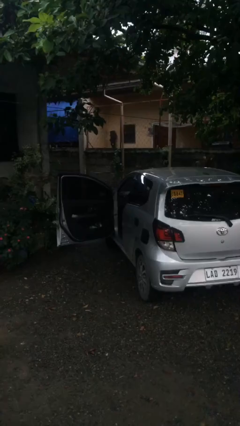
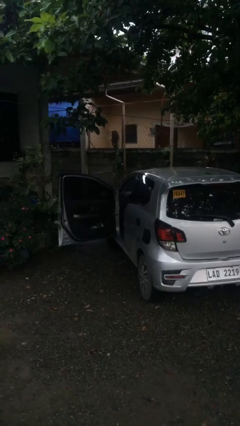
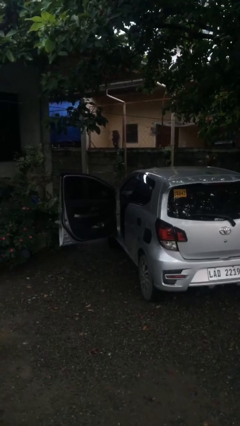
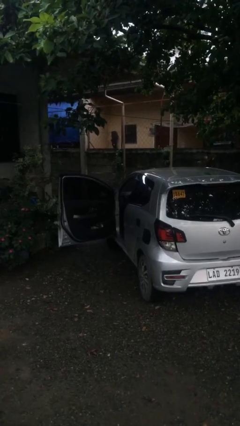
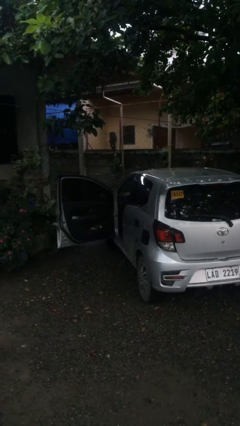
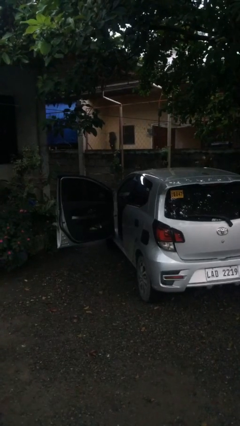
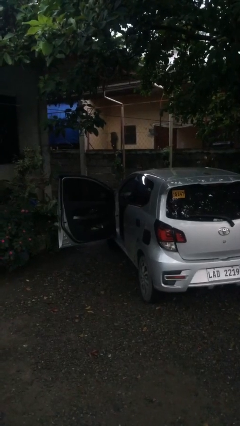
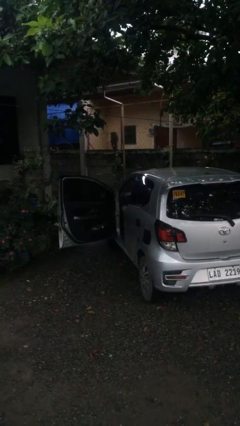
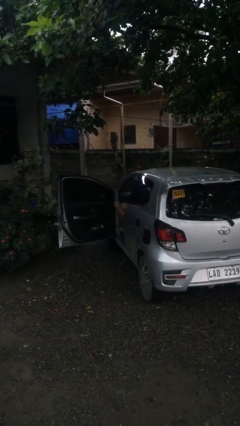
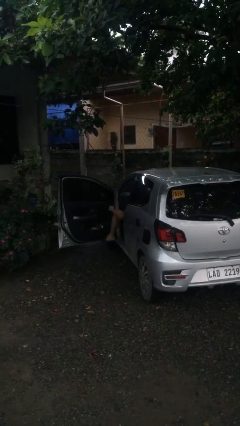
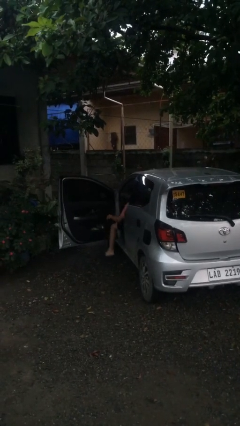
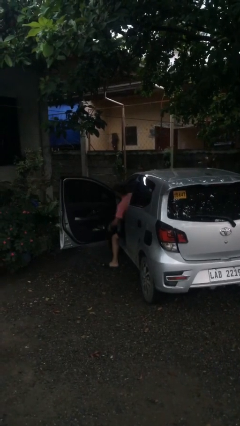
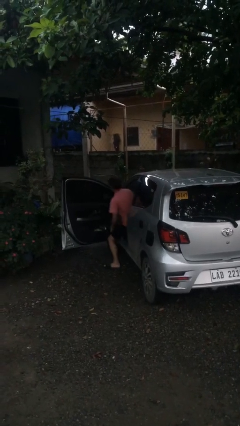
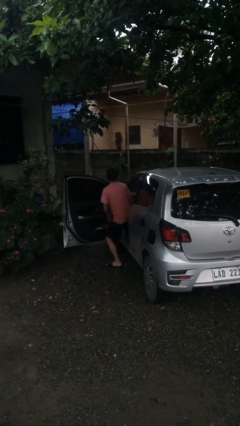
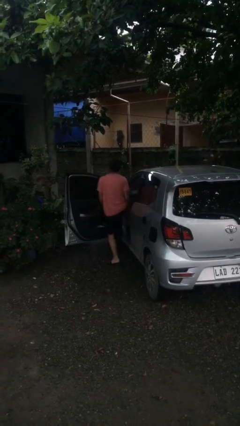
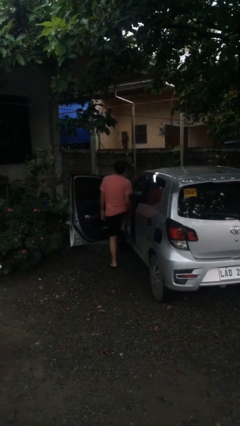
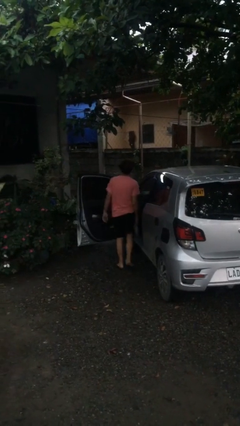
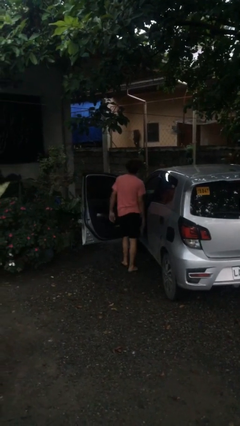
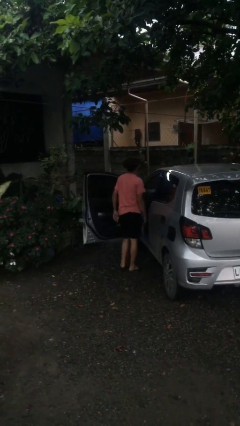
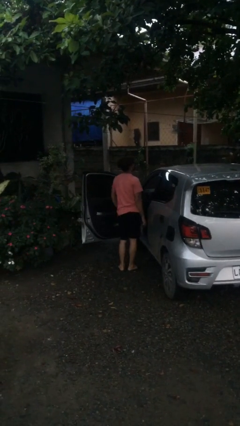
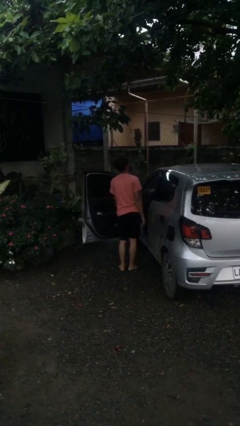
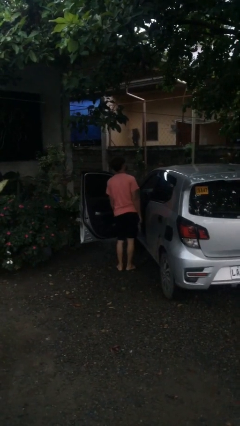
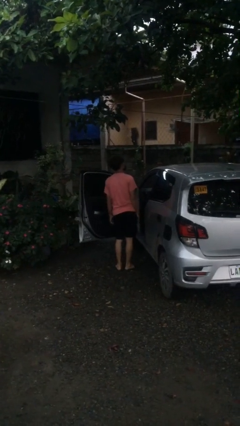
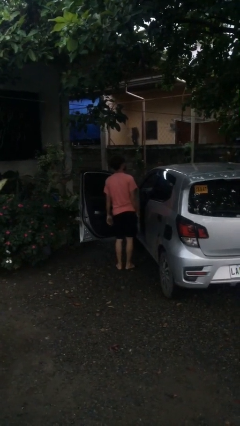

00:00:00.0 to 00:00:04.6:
person exits car

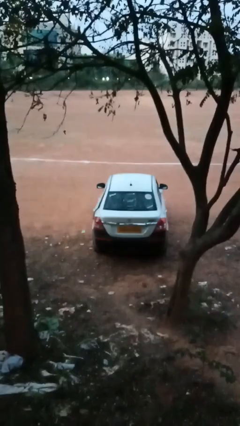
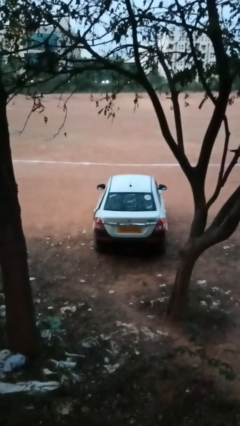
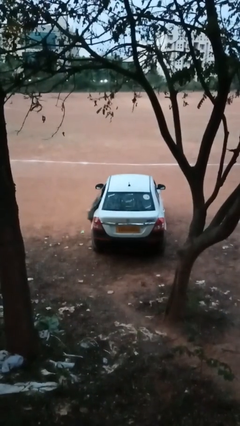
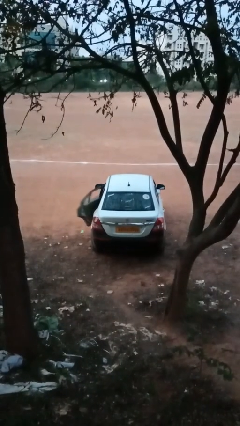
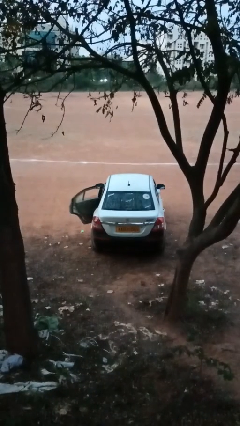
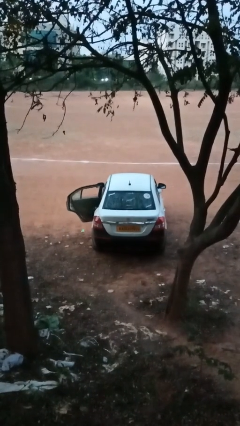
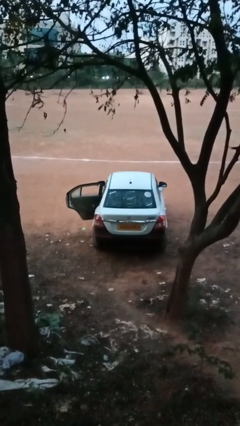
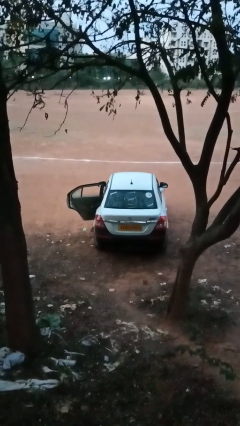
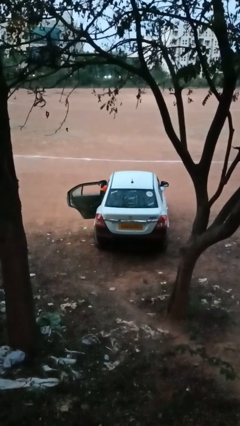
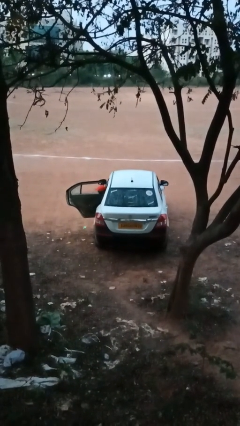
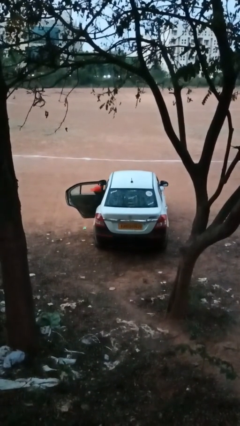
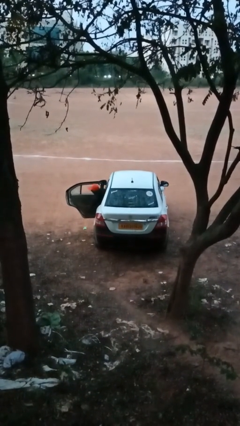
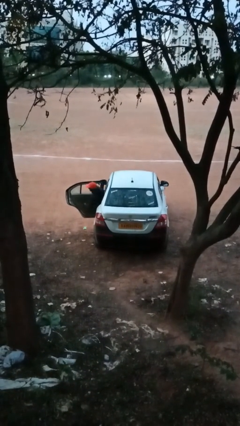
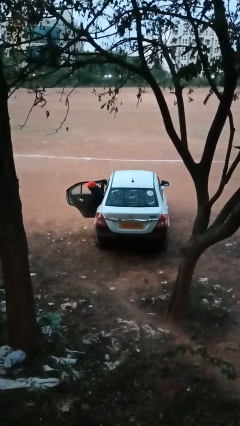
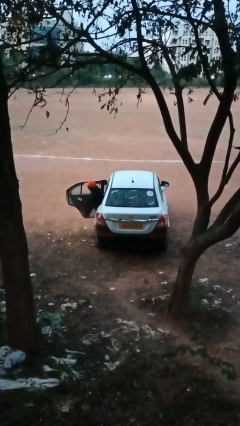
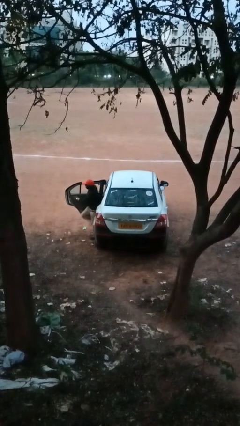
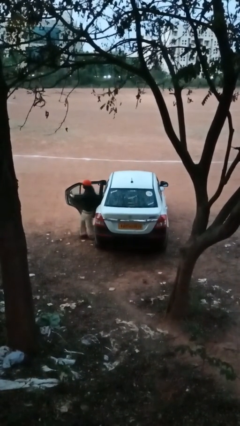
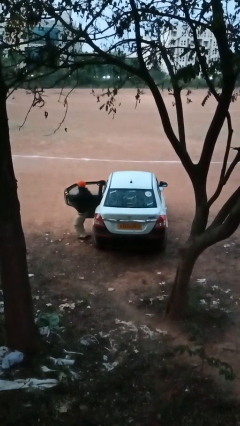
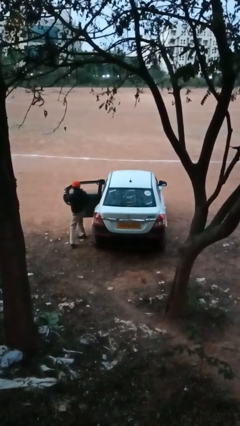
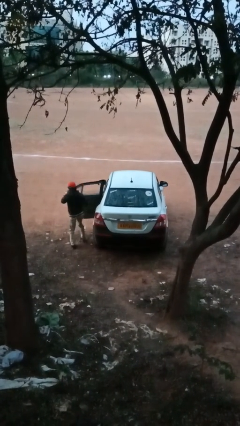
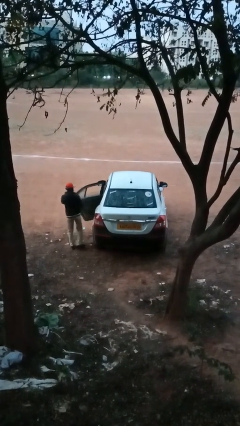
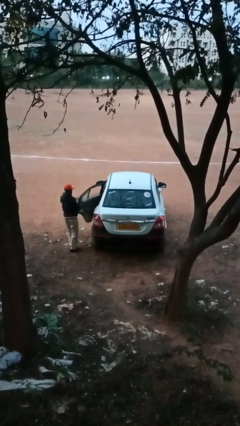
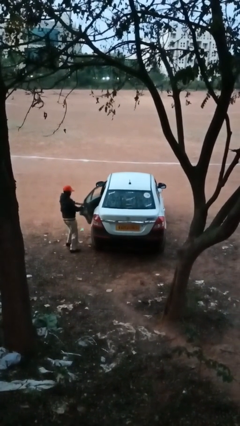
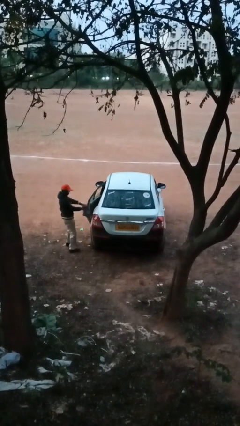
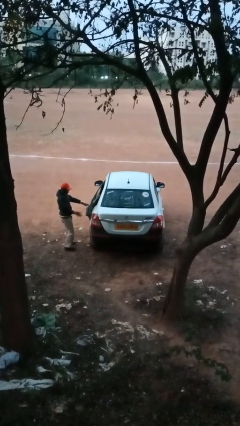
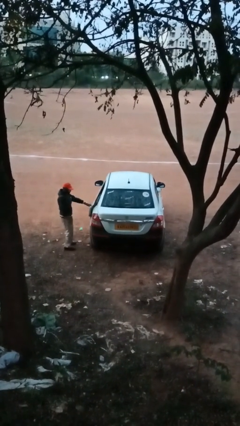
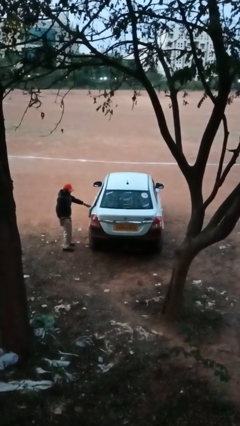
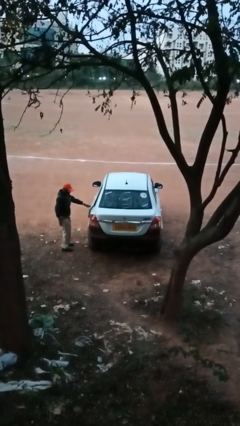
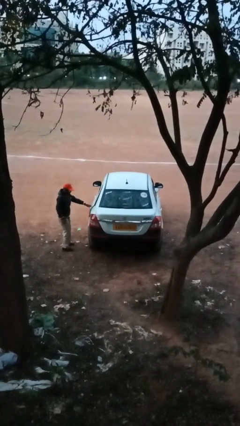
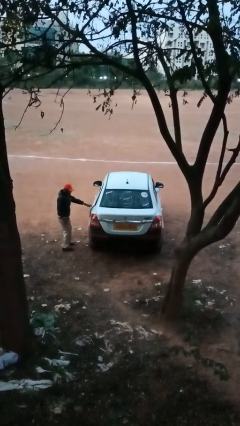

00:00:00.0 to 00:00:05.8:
car drops off person

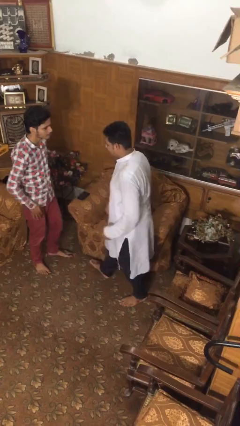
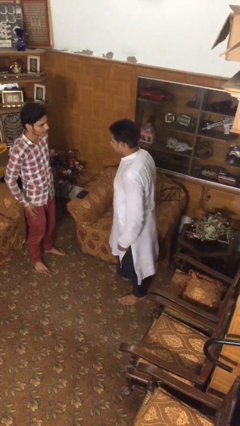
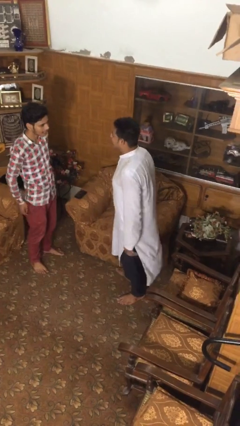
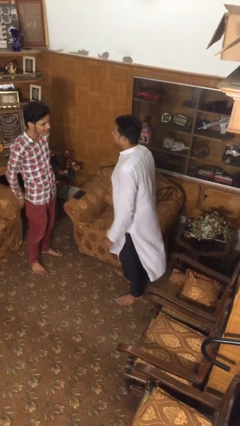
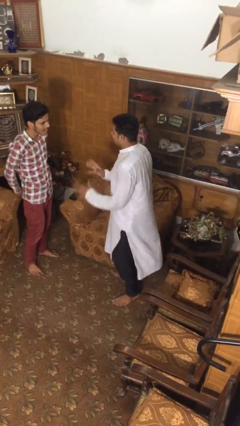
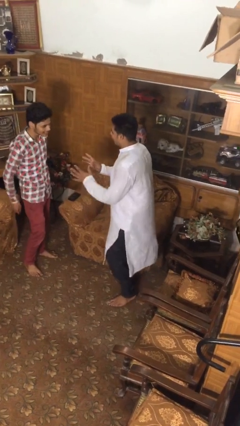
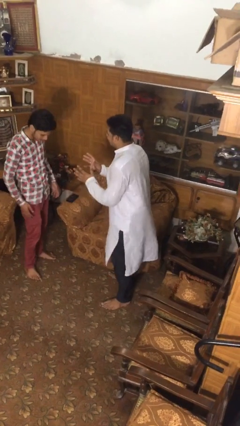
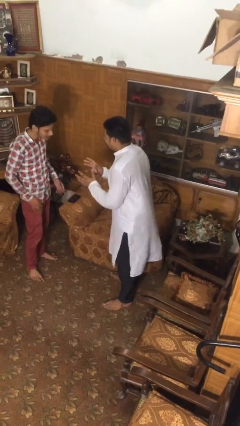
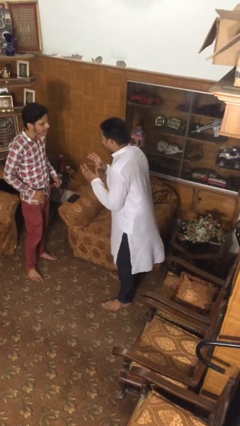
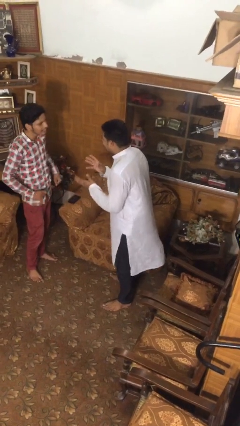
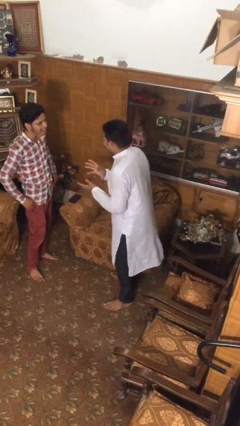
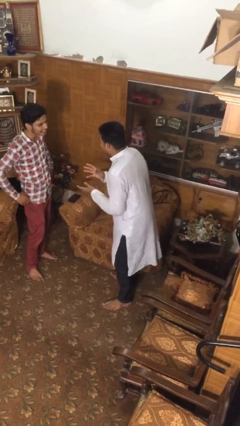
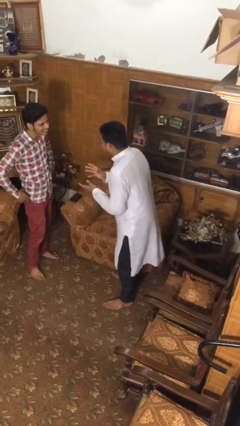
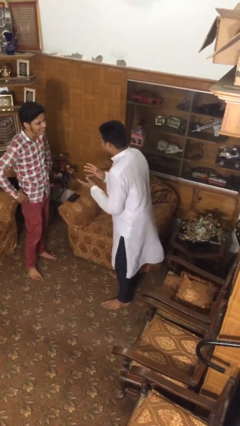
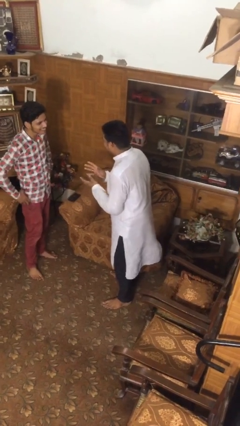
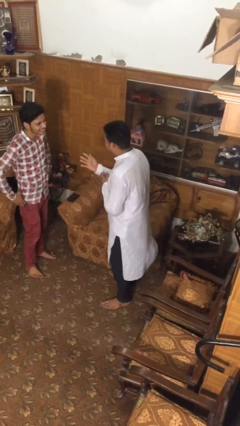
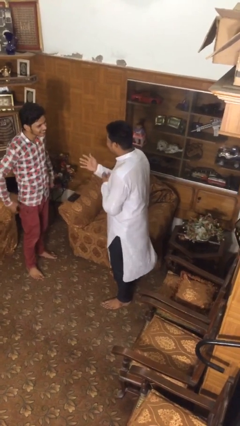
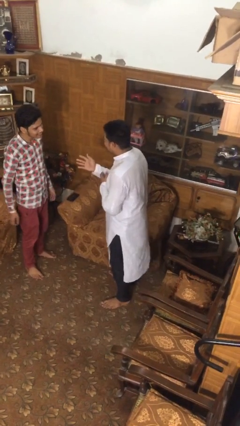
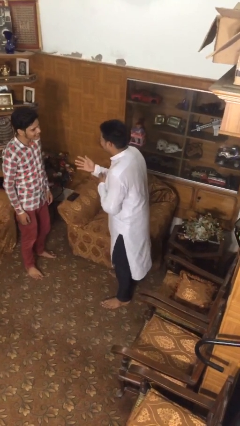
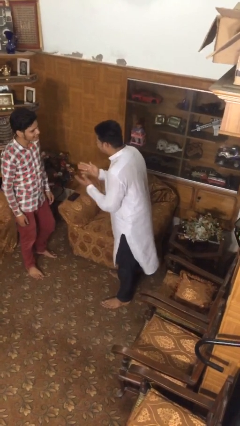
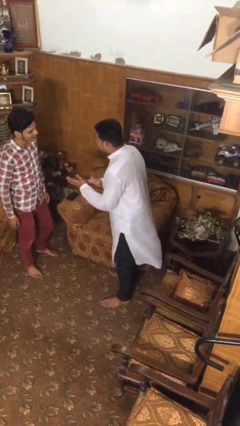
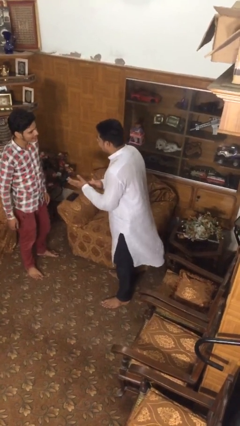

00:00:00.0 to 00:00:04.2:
person talks to person

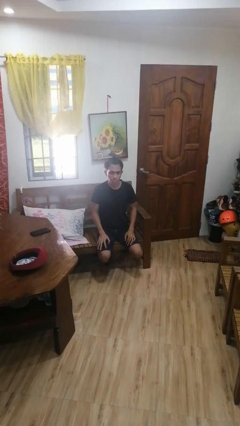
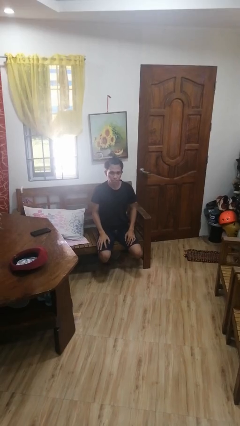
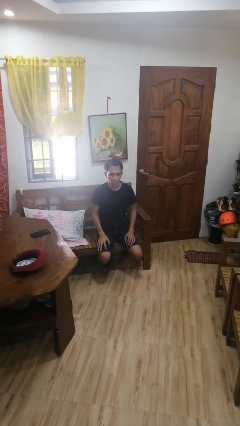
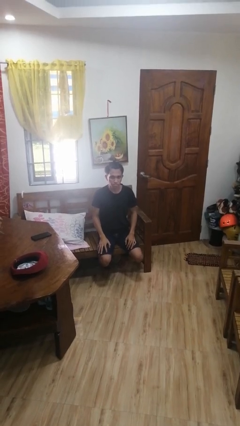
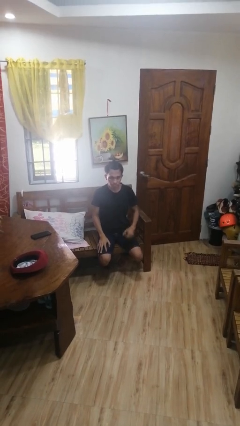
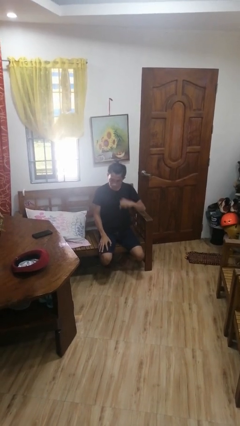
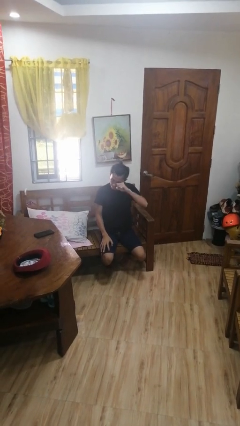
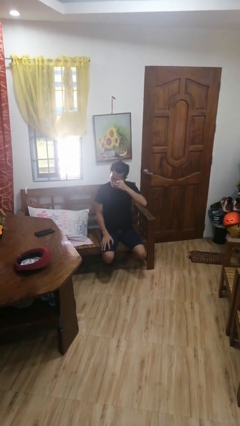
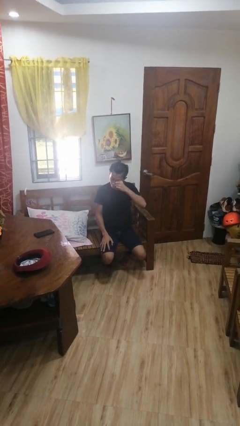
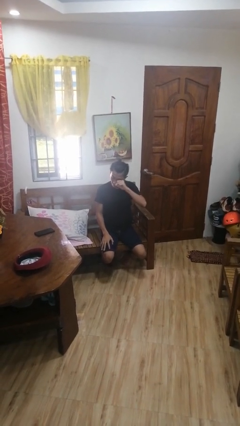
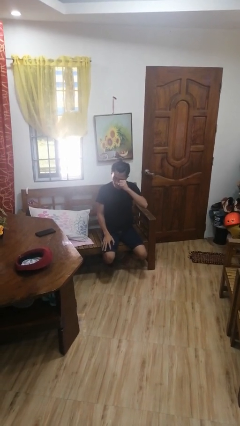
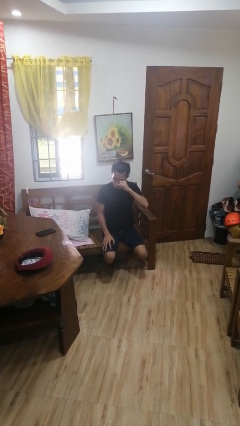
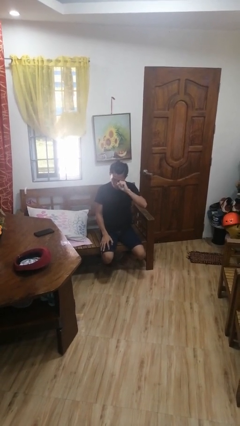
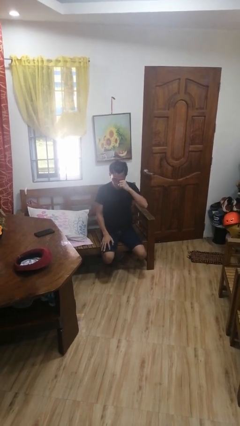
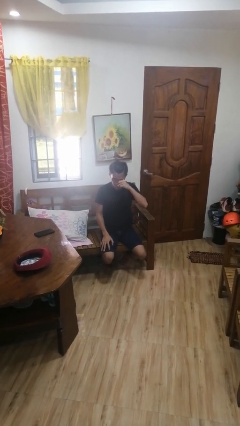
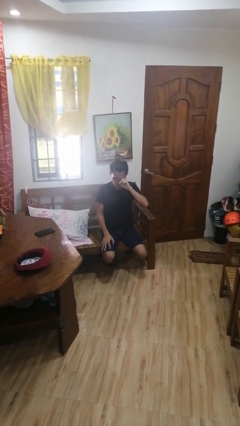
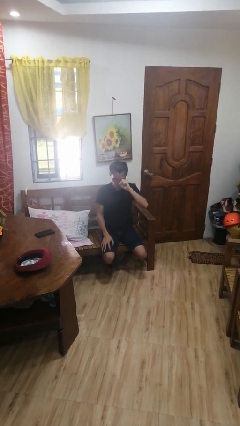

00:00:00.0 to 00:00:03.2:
person rubs eyes
